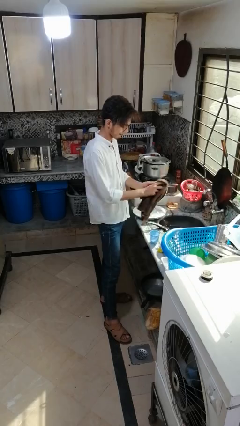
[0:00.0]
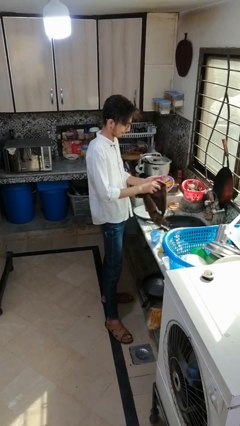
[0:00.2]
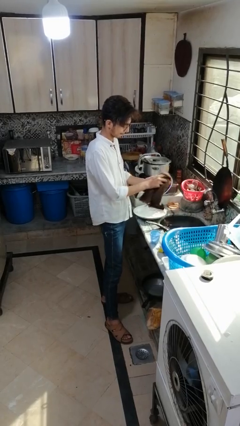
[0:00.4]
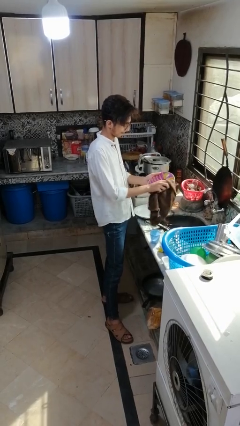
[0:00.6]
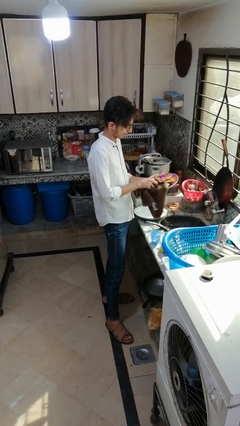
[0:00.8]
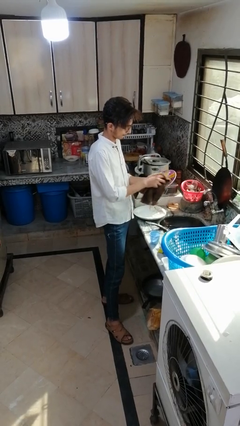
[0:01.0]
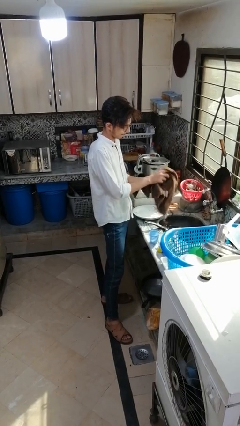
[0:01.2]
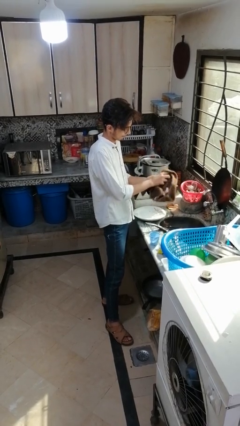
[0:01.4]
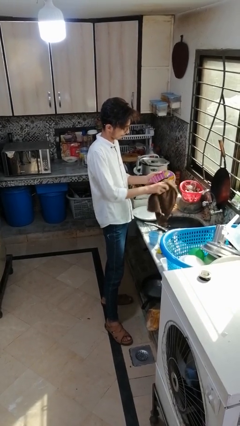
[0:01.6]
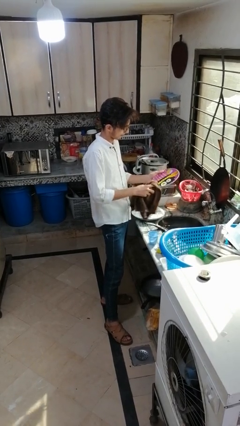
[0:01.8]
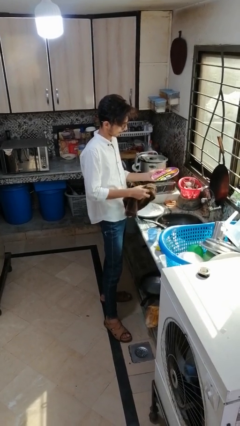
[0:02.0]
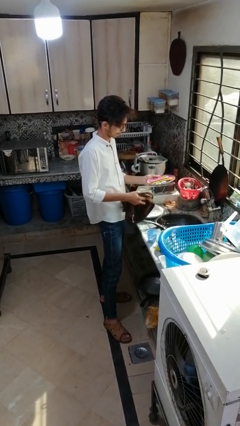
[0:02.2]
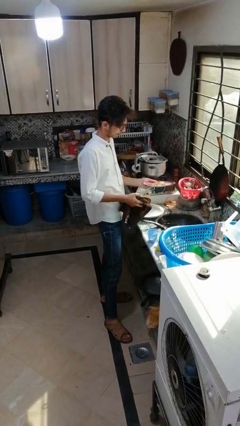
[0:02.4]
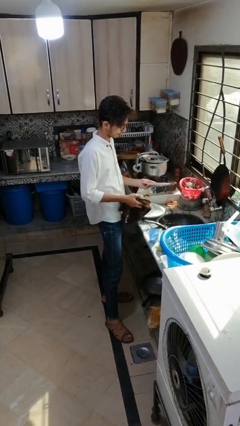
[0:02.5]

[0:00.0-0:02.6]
person dries dish

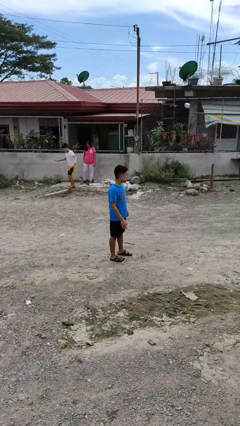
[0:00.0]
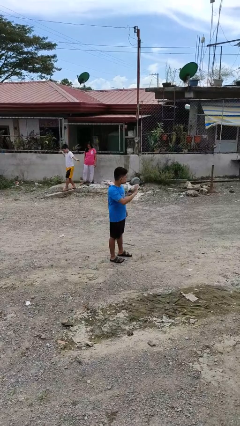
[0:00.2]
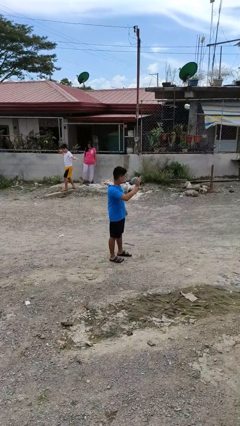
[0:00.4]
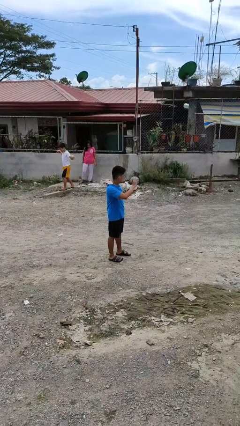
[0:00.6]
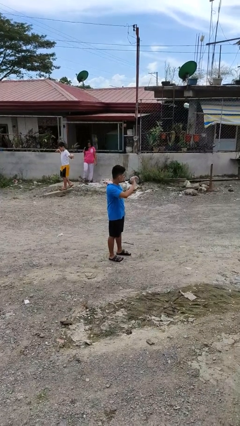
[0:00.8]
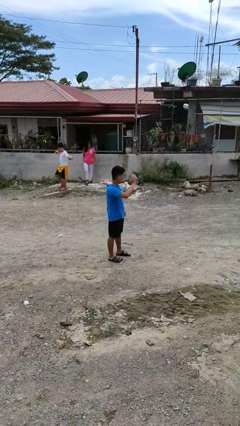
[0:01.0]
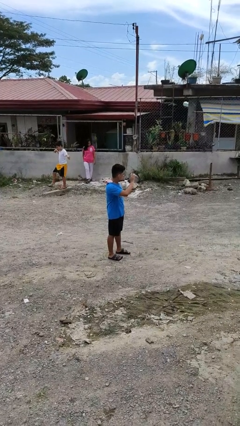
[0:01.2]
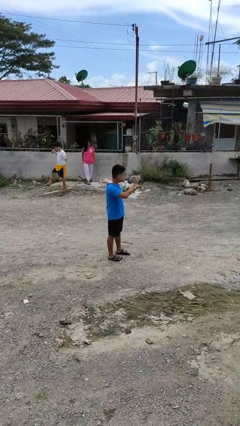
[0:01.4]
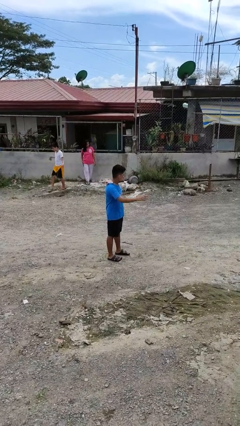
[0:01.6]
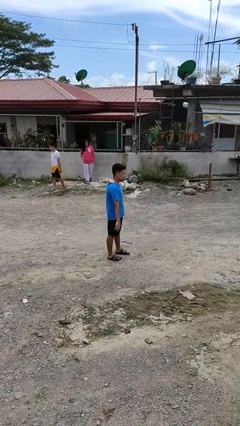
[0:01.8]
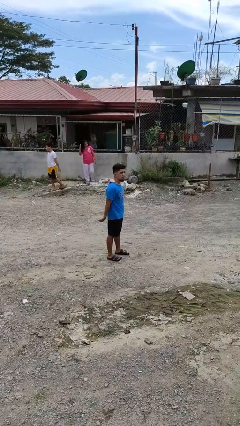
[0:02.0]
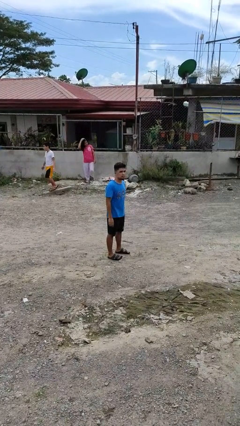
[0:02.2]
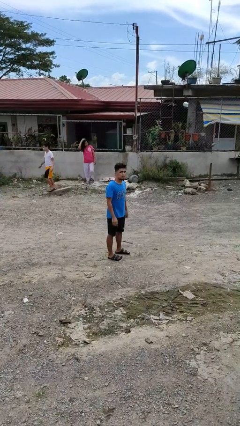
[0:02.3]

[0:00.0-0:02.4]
person waves at person

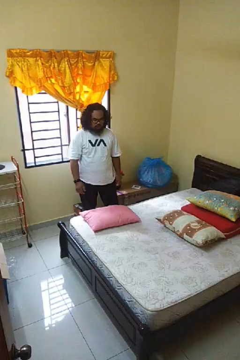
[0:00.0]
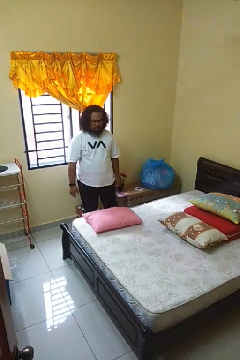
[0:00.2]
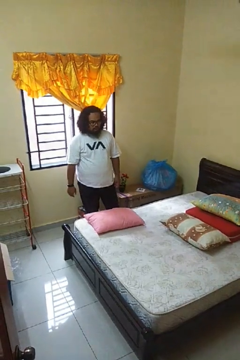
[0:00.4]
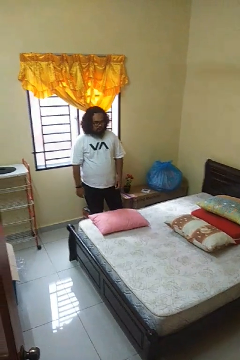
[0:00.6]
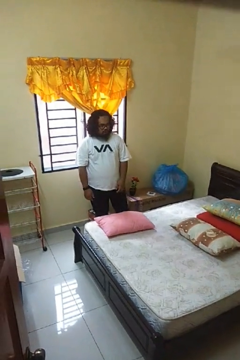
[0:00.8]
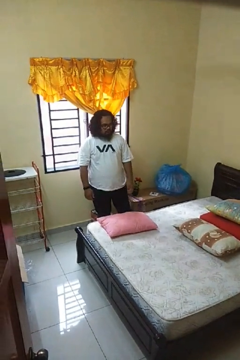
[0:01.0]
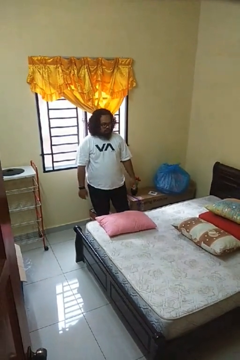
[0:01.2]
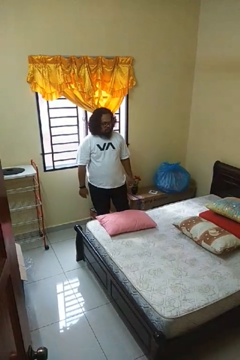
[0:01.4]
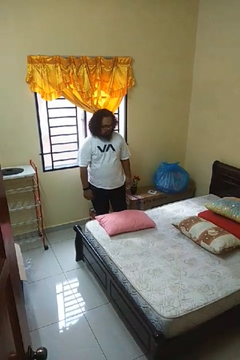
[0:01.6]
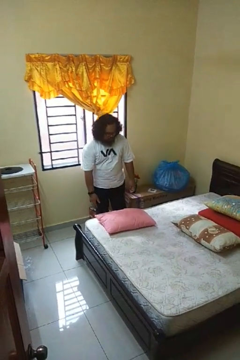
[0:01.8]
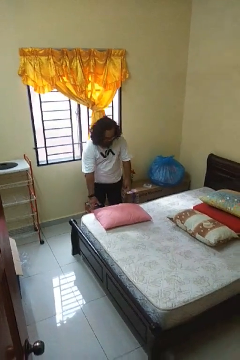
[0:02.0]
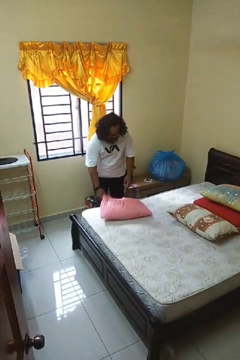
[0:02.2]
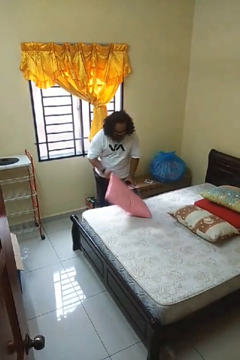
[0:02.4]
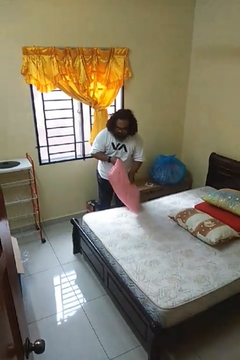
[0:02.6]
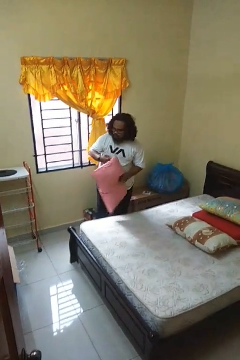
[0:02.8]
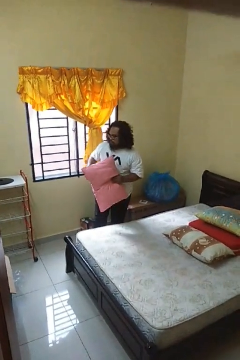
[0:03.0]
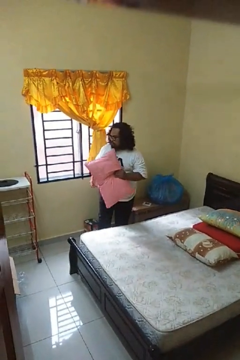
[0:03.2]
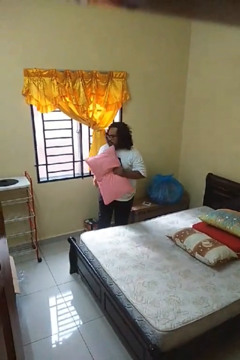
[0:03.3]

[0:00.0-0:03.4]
person picks up object from bed

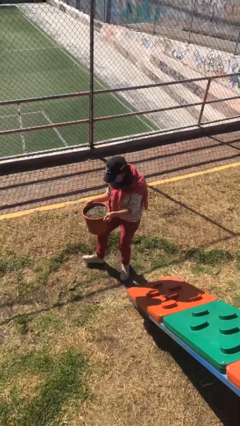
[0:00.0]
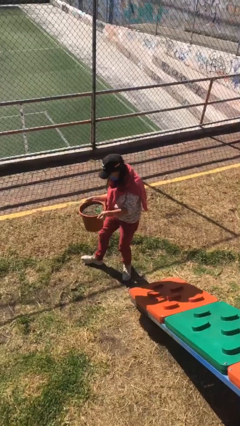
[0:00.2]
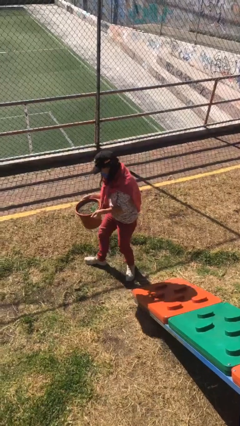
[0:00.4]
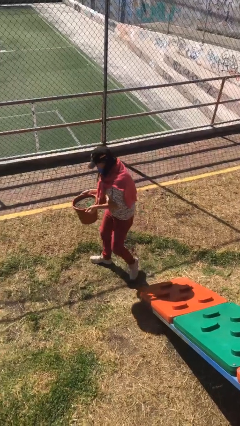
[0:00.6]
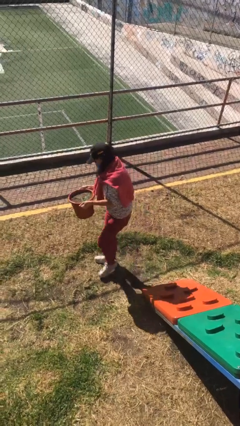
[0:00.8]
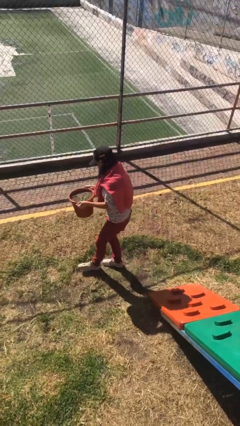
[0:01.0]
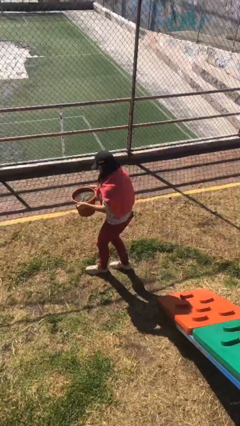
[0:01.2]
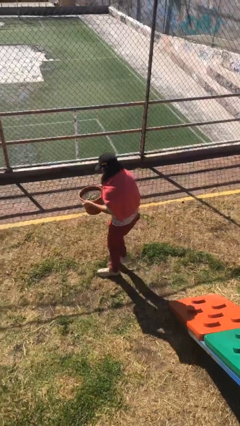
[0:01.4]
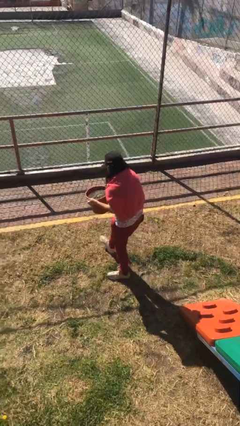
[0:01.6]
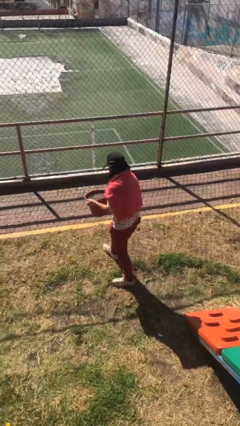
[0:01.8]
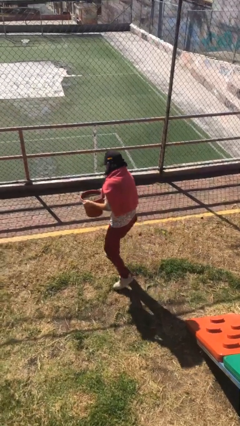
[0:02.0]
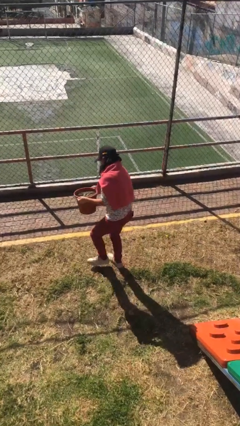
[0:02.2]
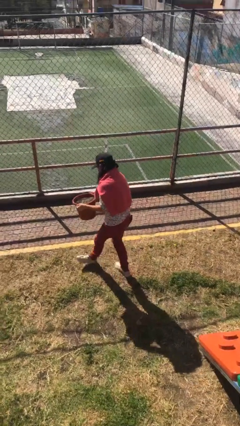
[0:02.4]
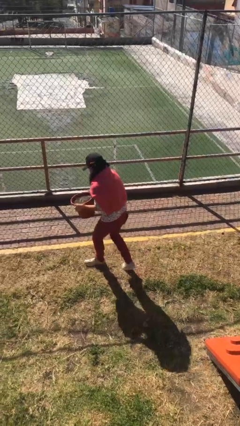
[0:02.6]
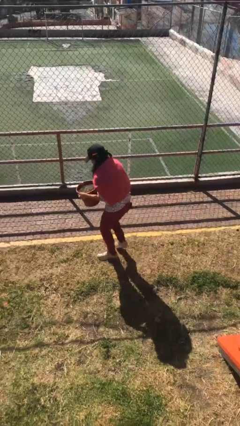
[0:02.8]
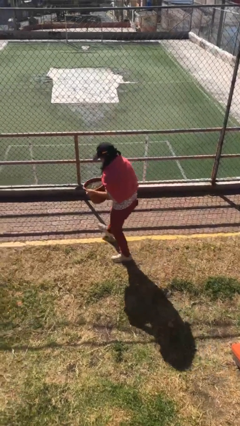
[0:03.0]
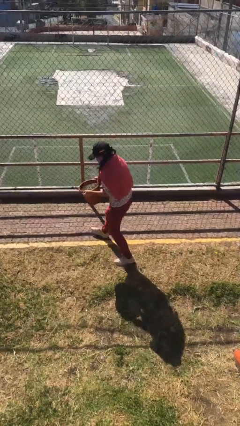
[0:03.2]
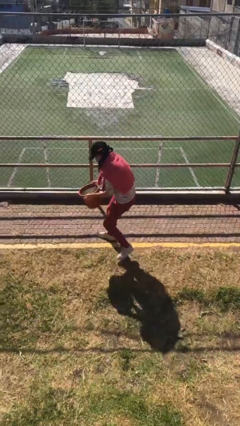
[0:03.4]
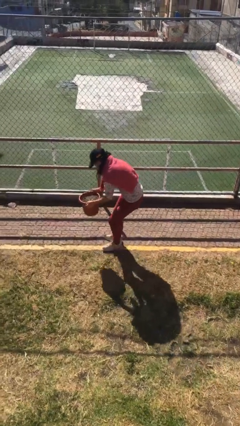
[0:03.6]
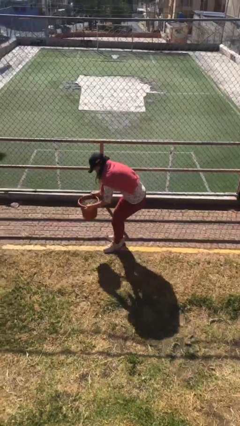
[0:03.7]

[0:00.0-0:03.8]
person carries heavy object

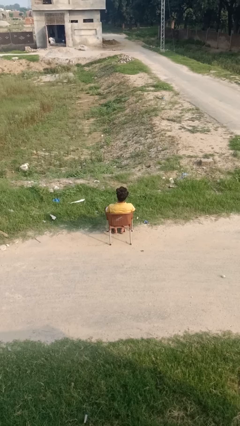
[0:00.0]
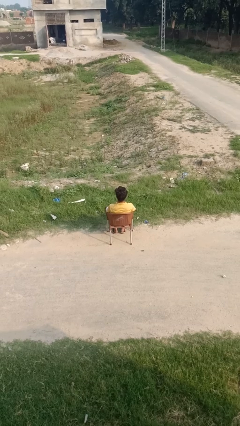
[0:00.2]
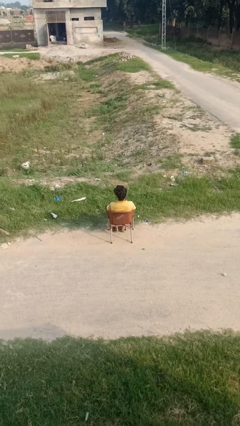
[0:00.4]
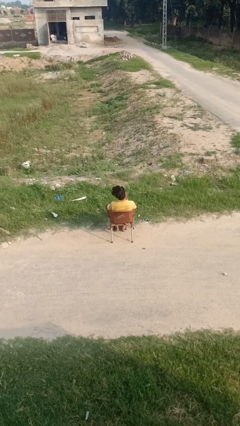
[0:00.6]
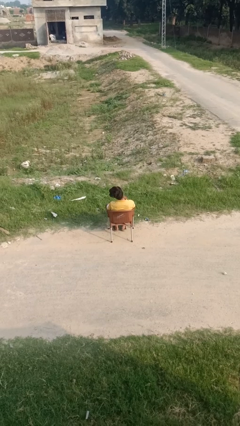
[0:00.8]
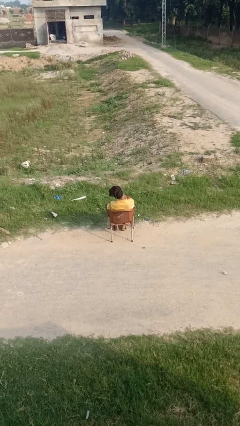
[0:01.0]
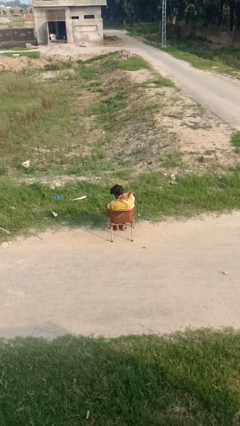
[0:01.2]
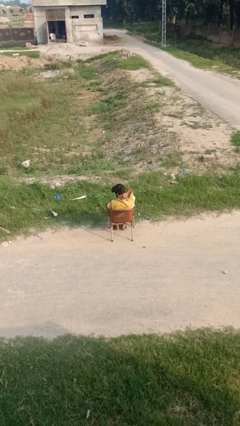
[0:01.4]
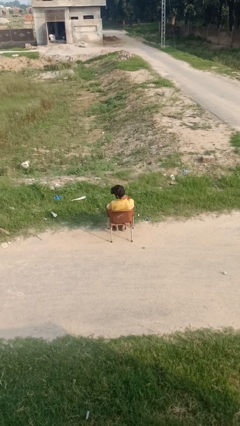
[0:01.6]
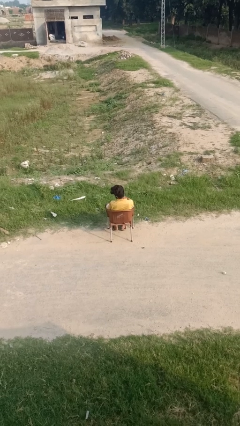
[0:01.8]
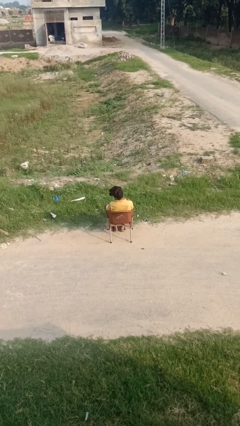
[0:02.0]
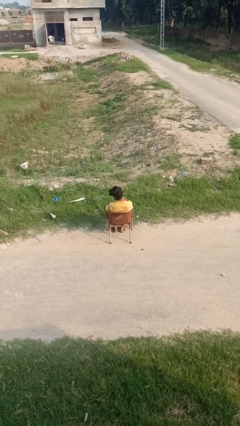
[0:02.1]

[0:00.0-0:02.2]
person rubs neck

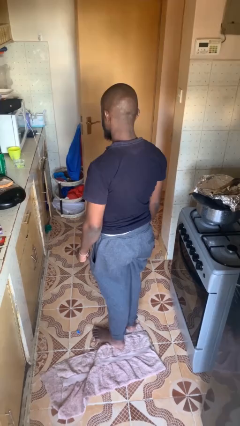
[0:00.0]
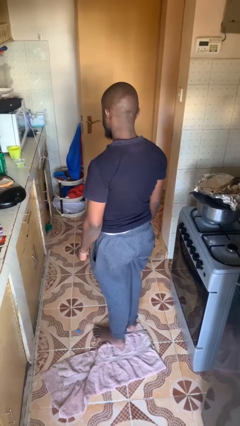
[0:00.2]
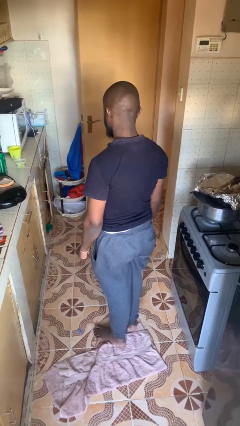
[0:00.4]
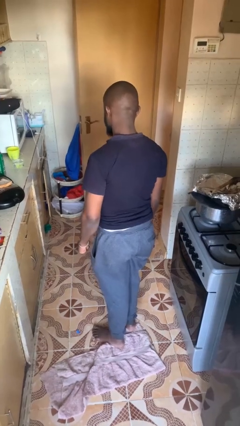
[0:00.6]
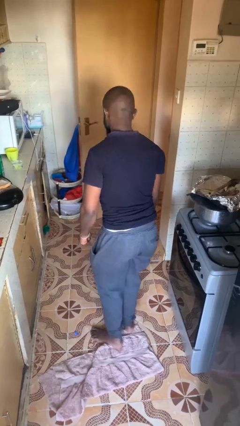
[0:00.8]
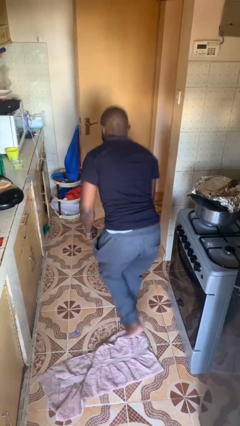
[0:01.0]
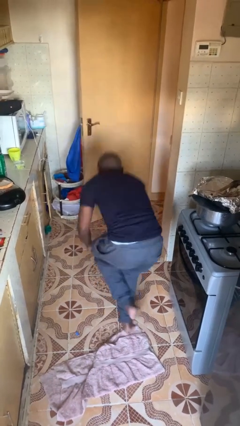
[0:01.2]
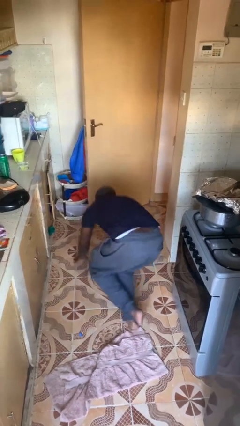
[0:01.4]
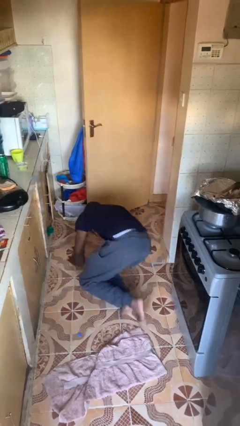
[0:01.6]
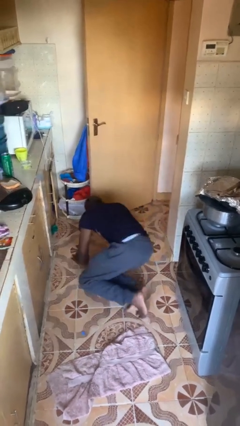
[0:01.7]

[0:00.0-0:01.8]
person trips on object on floor

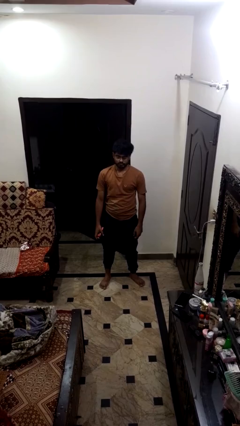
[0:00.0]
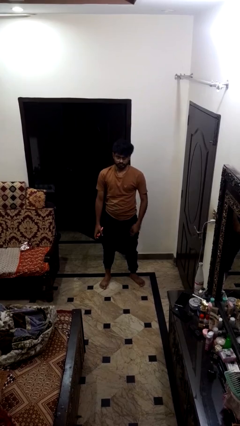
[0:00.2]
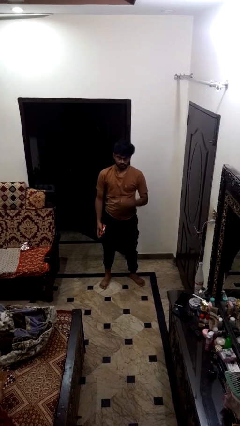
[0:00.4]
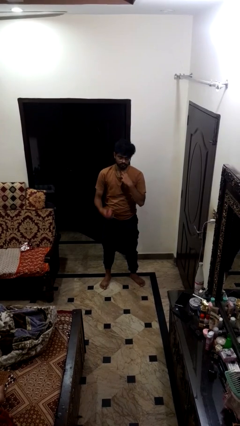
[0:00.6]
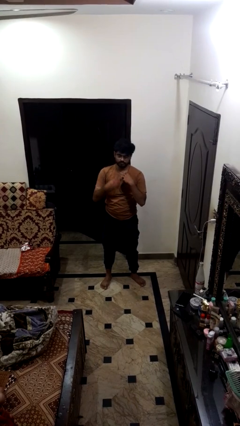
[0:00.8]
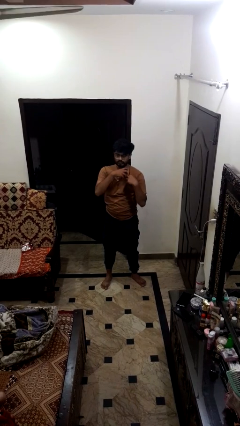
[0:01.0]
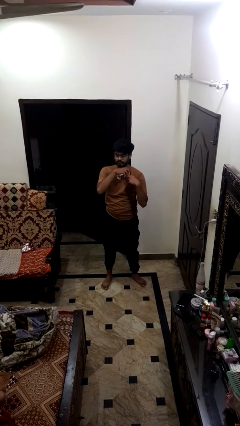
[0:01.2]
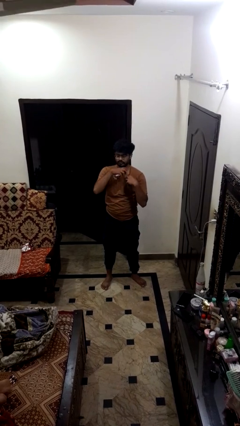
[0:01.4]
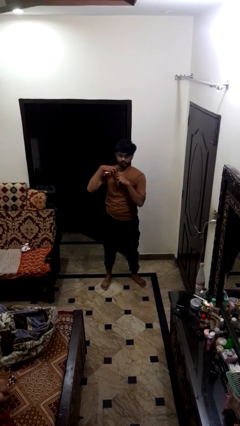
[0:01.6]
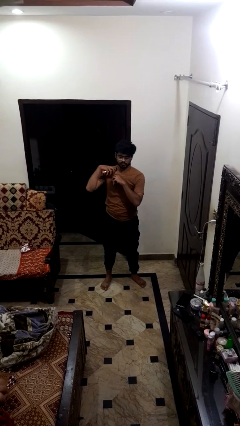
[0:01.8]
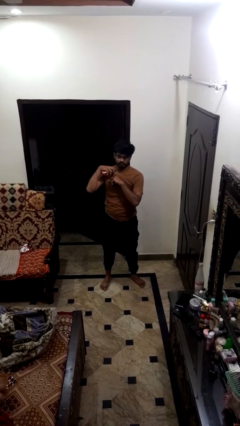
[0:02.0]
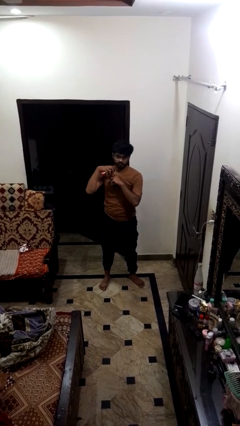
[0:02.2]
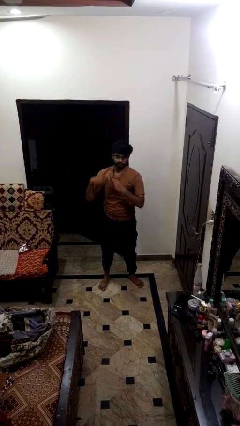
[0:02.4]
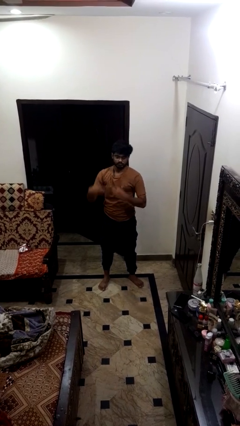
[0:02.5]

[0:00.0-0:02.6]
person applies deodorant
